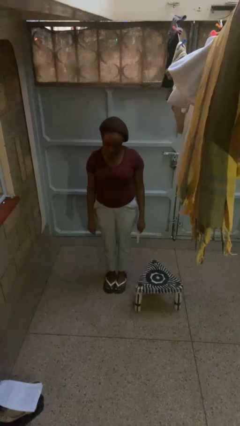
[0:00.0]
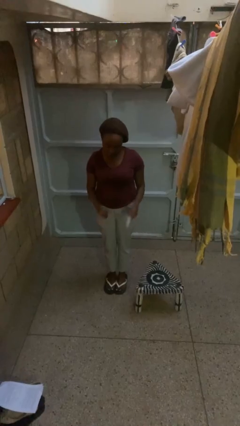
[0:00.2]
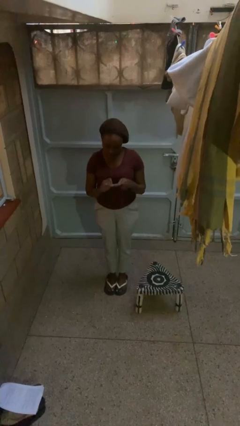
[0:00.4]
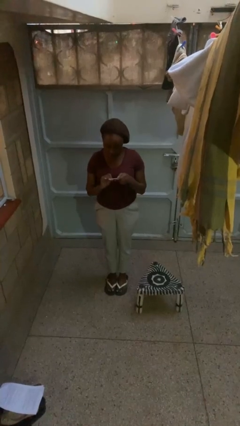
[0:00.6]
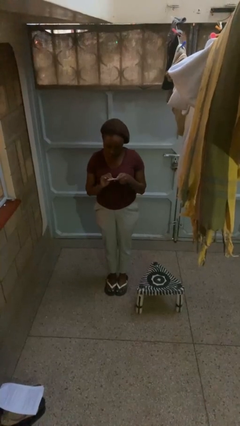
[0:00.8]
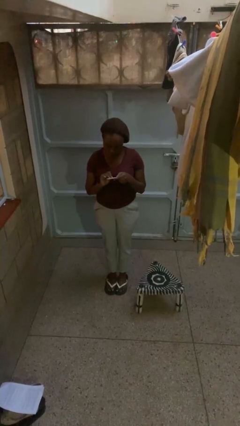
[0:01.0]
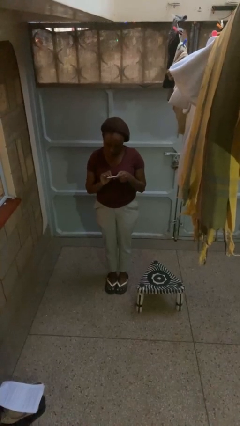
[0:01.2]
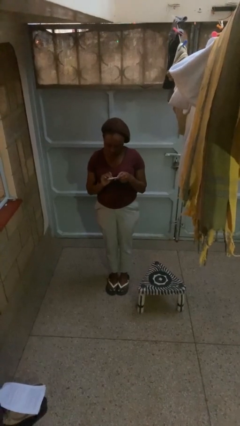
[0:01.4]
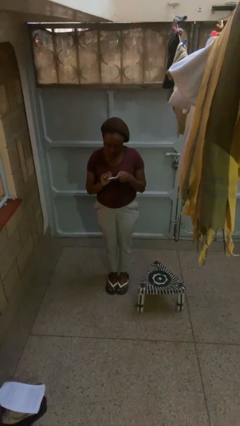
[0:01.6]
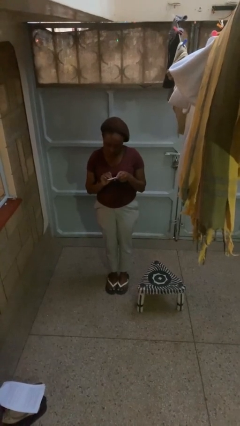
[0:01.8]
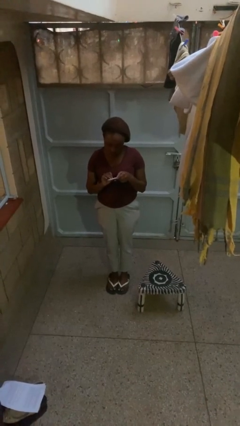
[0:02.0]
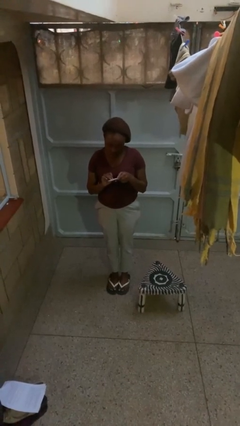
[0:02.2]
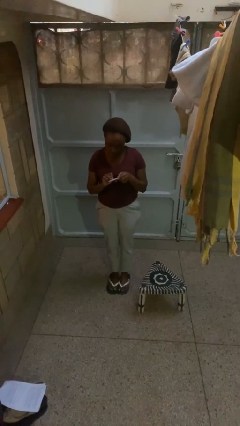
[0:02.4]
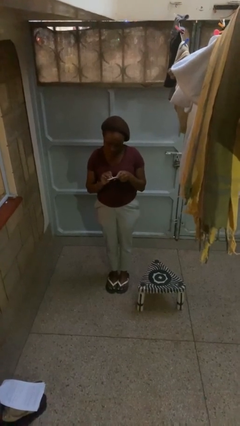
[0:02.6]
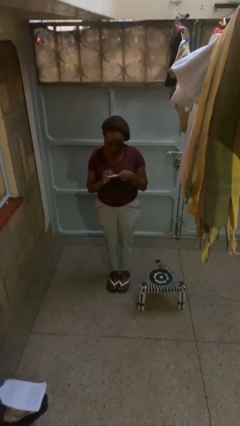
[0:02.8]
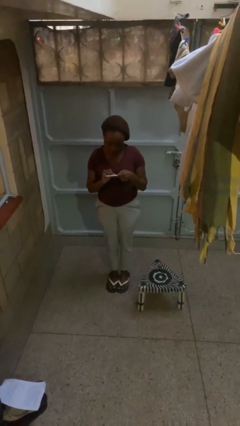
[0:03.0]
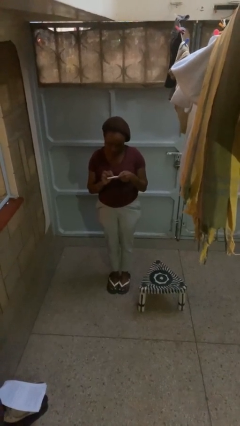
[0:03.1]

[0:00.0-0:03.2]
person files fingernails

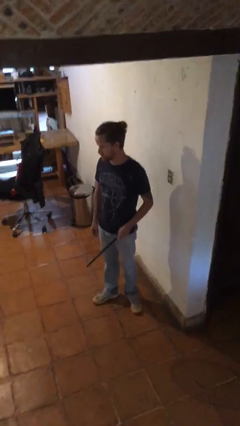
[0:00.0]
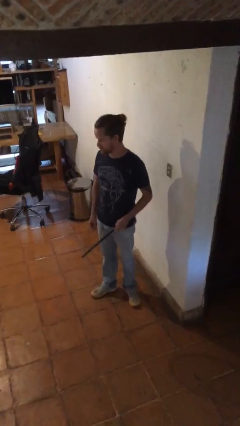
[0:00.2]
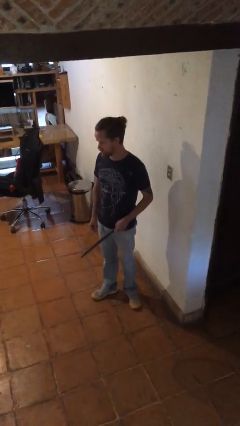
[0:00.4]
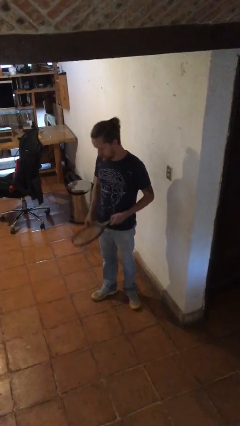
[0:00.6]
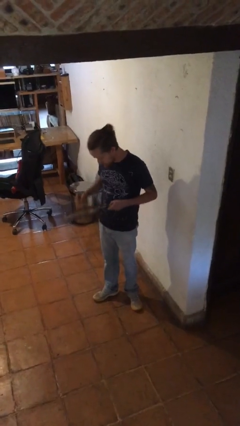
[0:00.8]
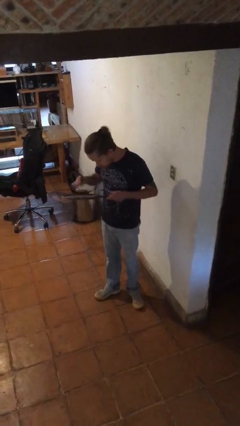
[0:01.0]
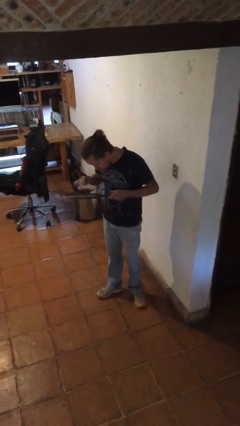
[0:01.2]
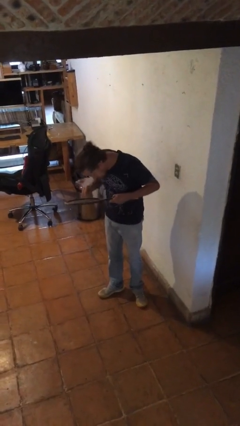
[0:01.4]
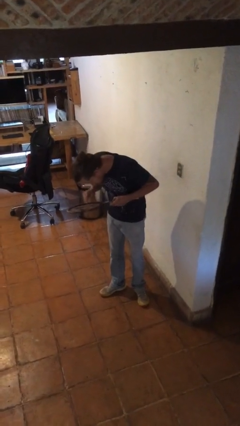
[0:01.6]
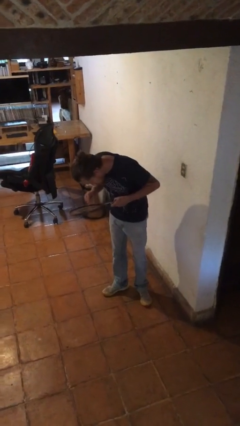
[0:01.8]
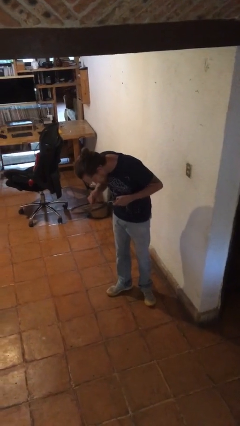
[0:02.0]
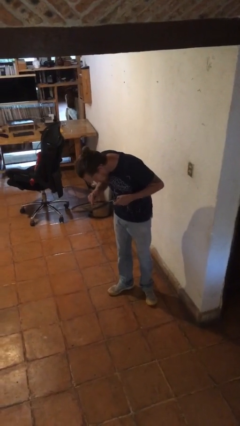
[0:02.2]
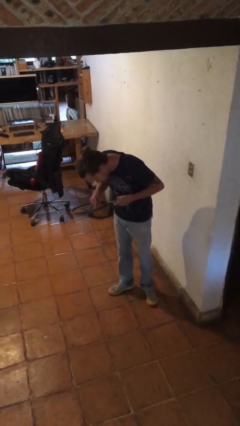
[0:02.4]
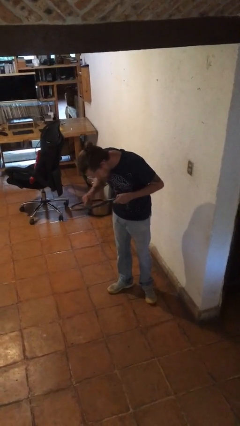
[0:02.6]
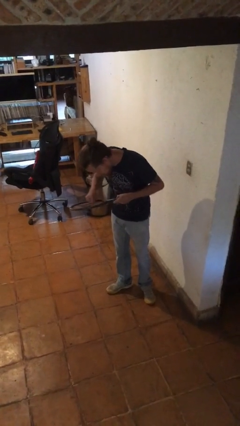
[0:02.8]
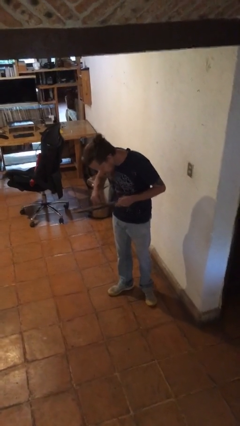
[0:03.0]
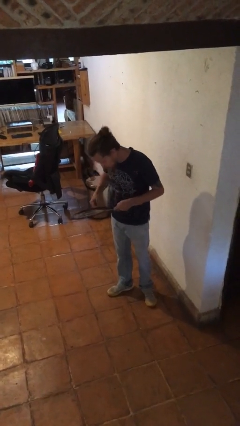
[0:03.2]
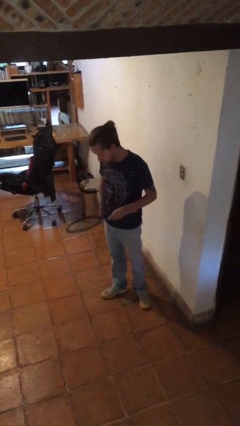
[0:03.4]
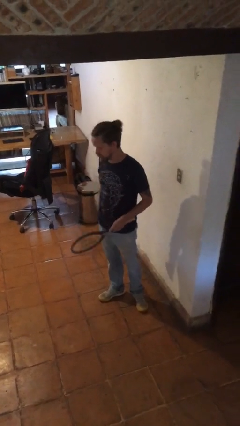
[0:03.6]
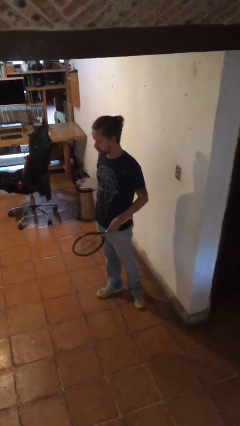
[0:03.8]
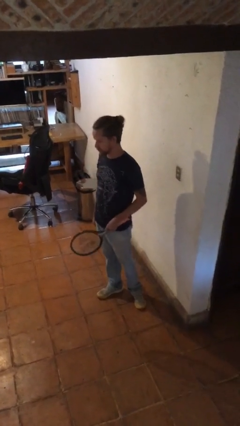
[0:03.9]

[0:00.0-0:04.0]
person taps object with finger

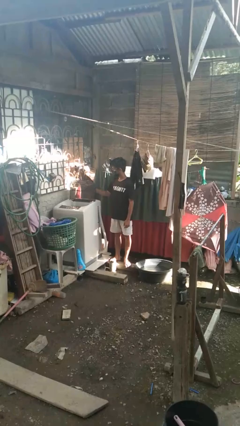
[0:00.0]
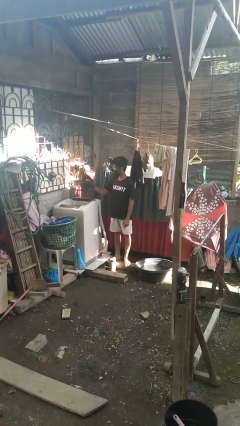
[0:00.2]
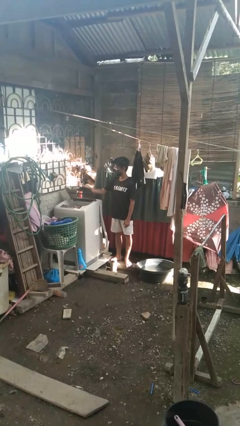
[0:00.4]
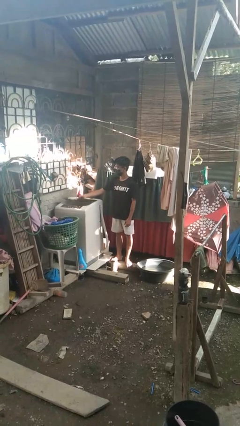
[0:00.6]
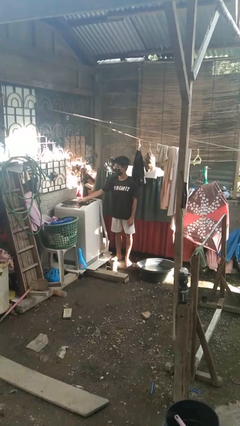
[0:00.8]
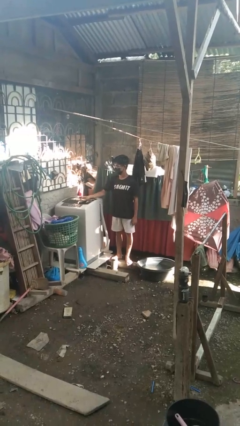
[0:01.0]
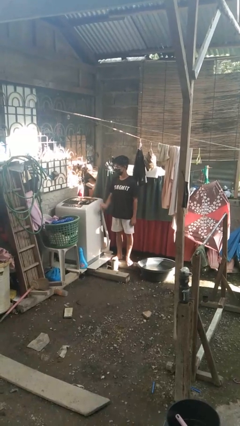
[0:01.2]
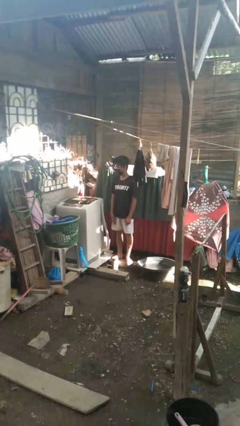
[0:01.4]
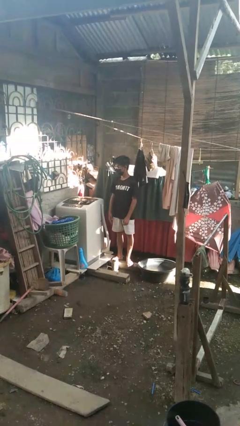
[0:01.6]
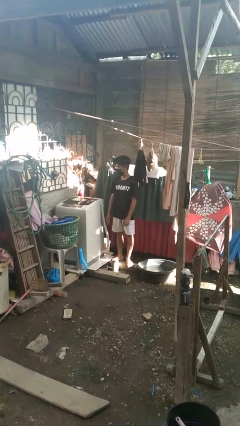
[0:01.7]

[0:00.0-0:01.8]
person closes clothes washer

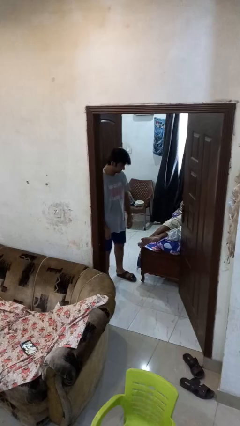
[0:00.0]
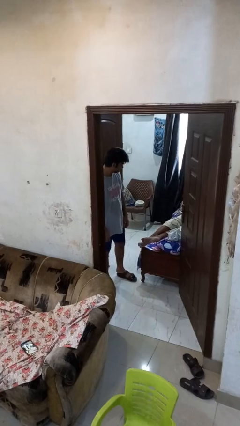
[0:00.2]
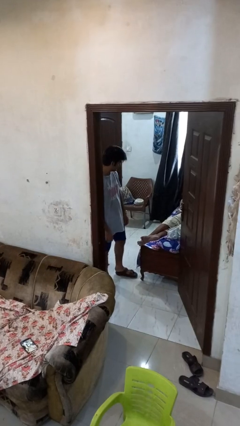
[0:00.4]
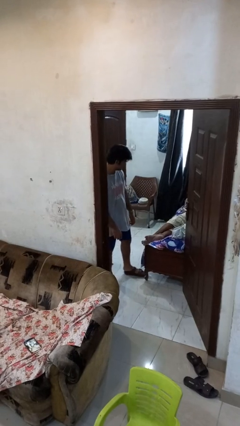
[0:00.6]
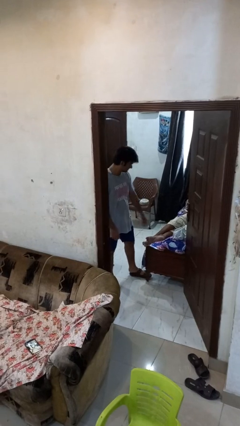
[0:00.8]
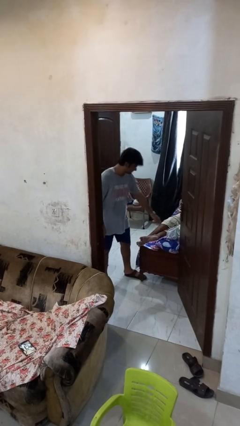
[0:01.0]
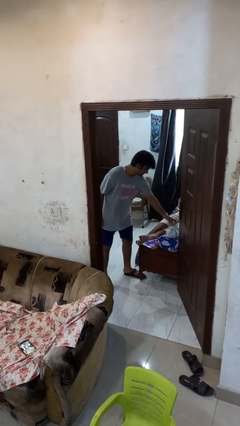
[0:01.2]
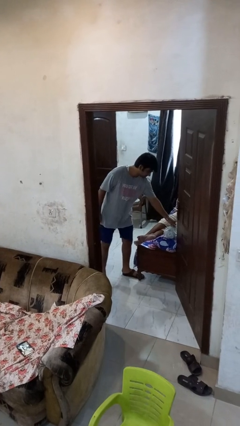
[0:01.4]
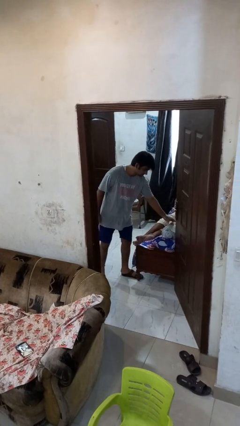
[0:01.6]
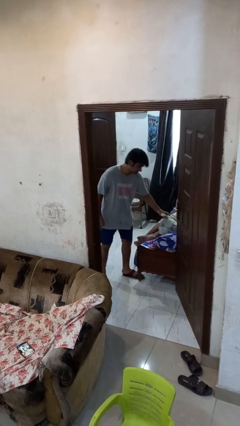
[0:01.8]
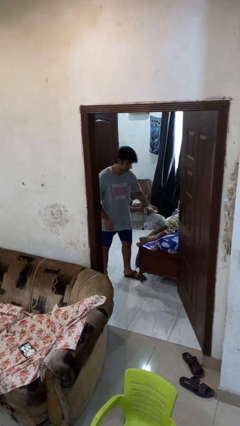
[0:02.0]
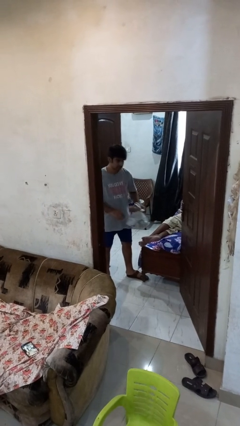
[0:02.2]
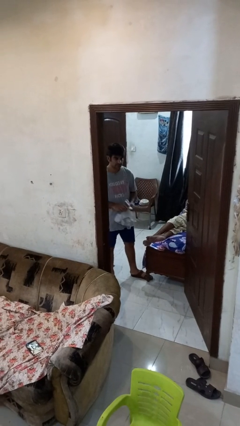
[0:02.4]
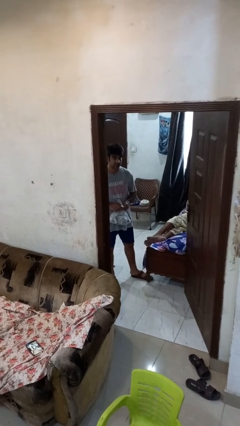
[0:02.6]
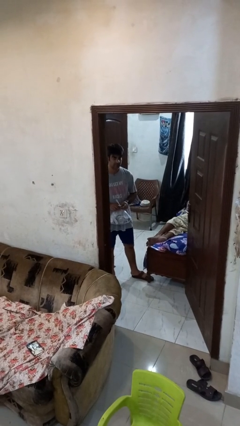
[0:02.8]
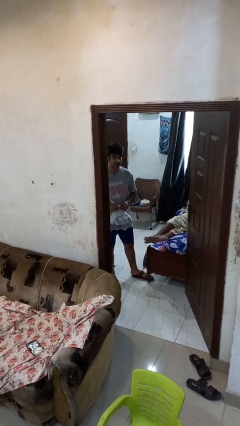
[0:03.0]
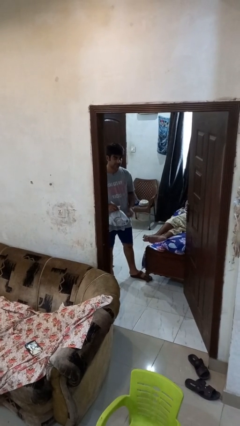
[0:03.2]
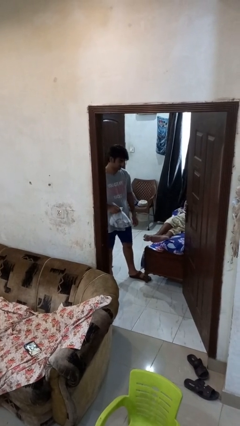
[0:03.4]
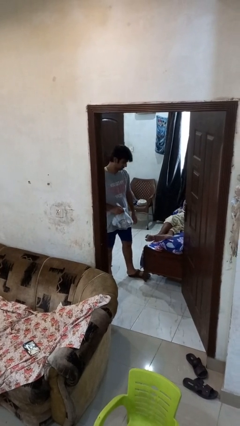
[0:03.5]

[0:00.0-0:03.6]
person picks up object from bed

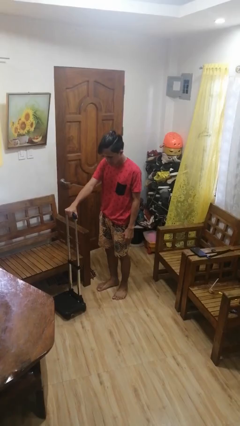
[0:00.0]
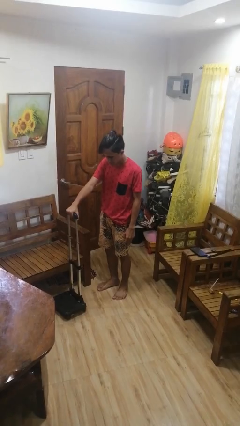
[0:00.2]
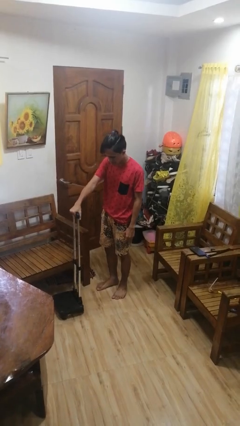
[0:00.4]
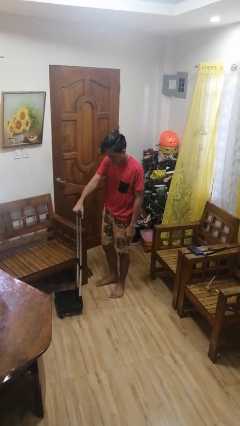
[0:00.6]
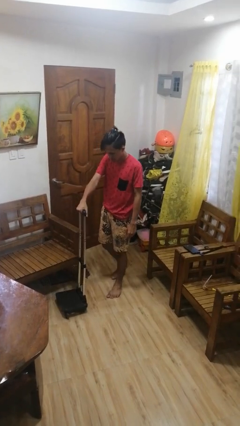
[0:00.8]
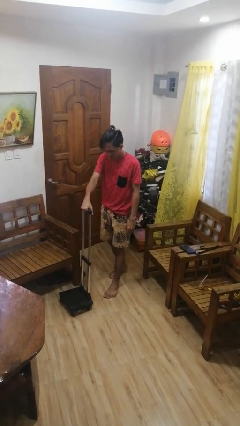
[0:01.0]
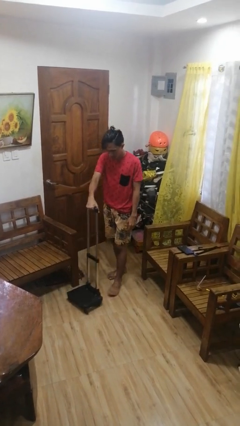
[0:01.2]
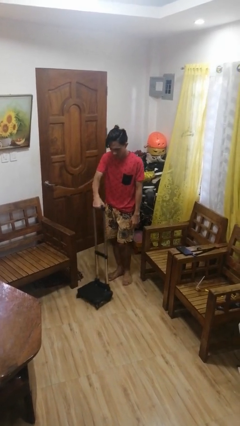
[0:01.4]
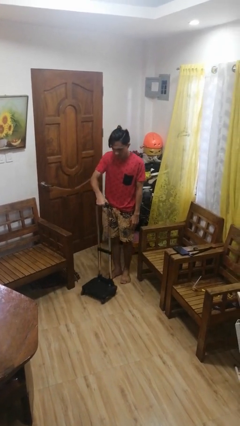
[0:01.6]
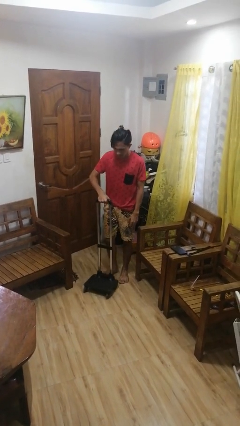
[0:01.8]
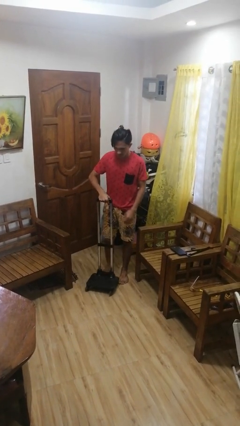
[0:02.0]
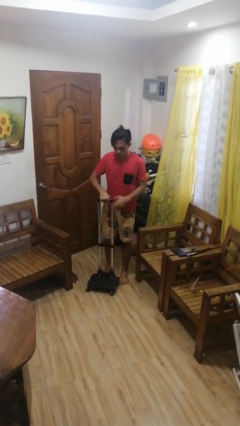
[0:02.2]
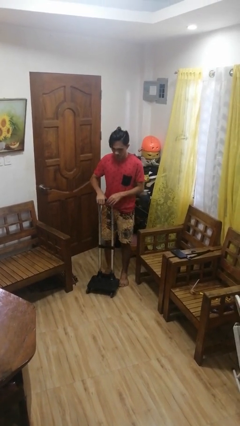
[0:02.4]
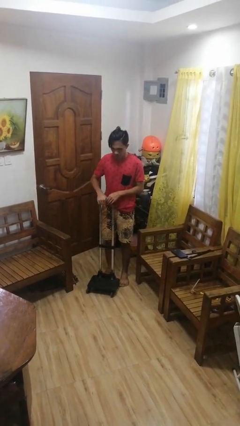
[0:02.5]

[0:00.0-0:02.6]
person pulls wheeled cart

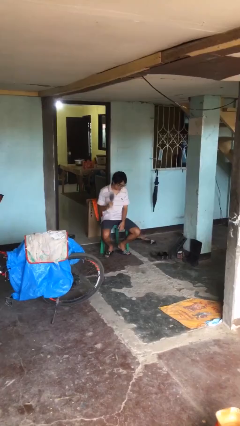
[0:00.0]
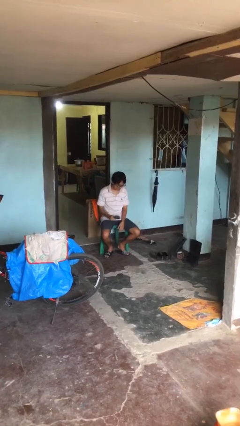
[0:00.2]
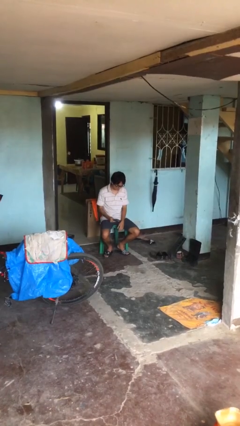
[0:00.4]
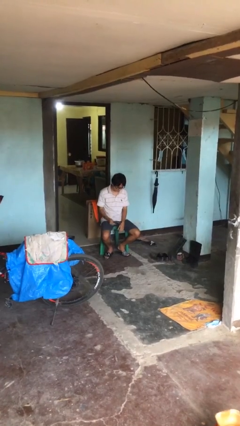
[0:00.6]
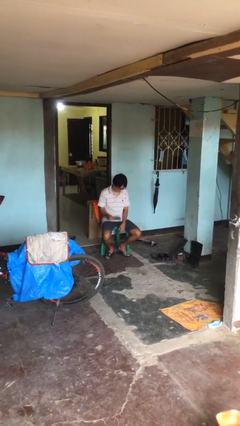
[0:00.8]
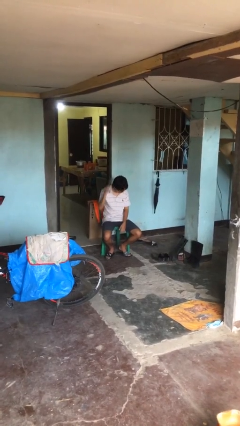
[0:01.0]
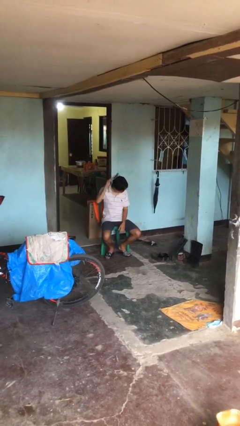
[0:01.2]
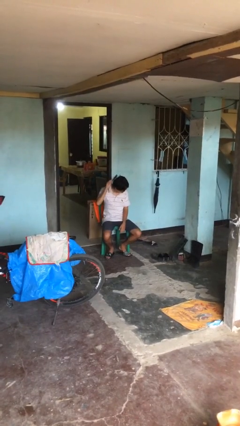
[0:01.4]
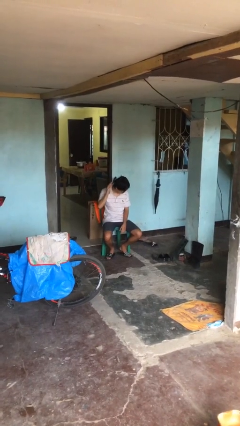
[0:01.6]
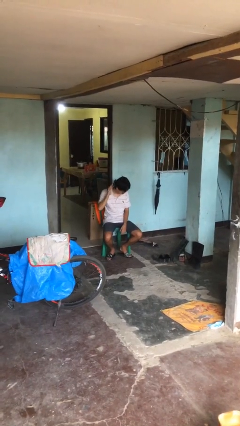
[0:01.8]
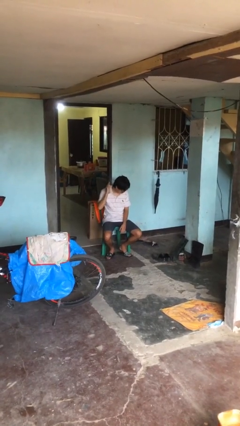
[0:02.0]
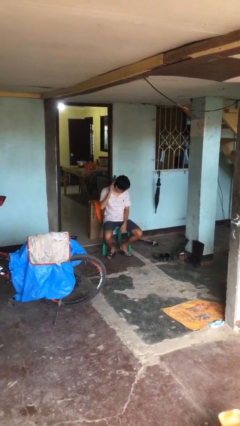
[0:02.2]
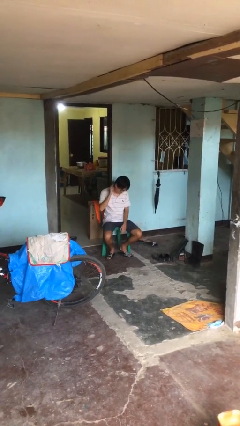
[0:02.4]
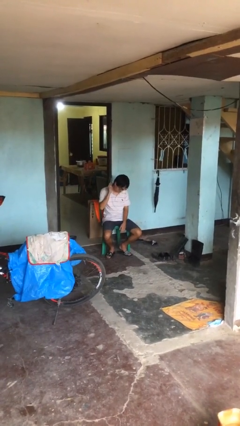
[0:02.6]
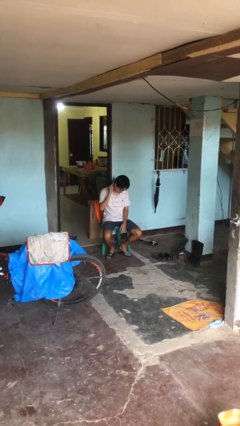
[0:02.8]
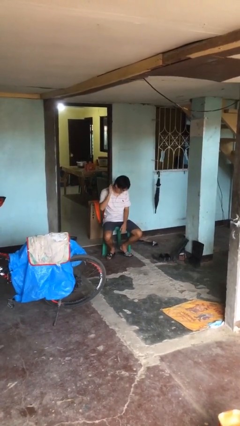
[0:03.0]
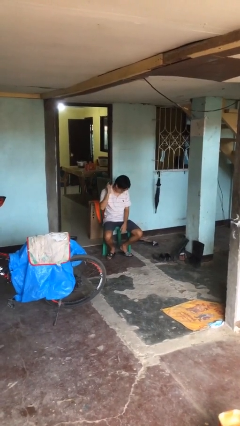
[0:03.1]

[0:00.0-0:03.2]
person brushes hair
